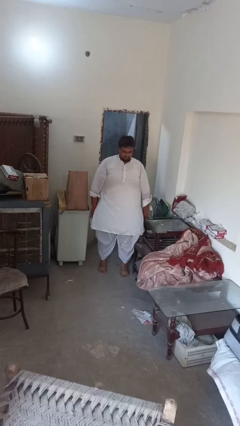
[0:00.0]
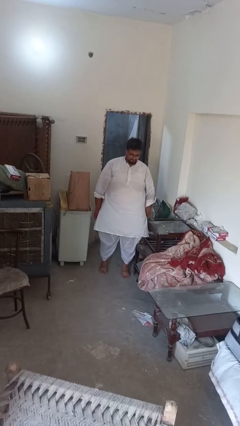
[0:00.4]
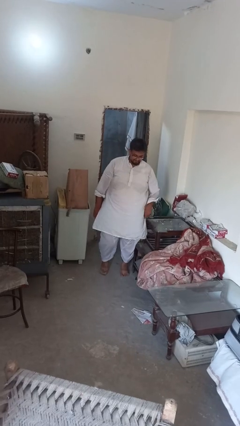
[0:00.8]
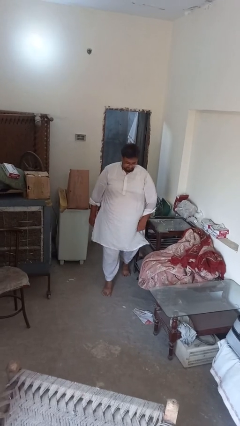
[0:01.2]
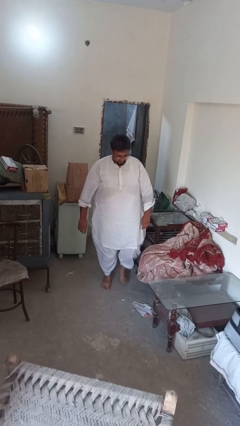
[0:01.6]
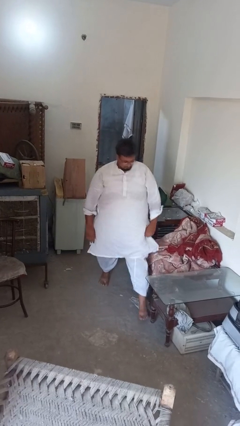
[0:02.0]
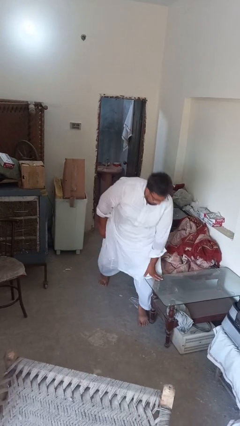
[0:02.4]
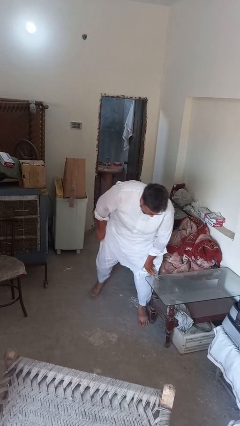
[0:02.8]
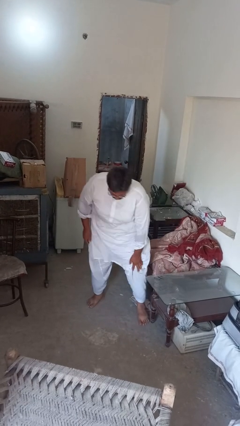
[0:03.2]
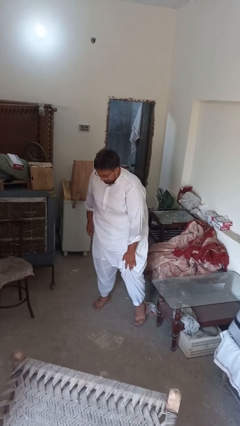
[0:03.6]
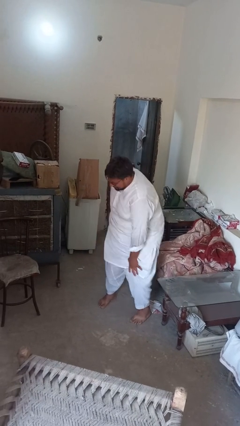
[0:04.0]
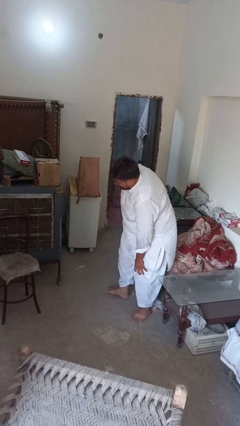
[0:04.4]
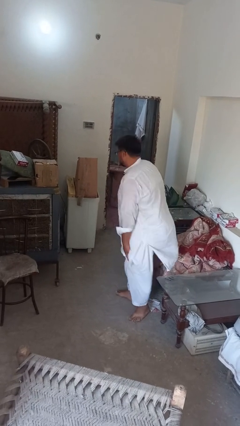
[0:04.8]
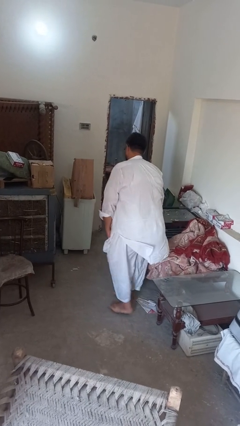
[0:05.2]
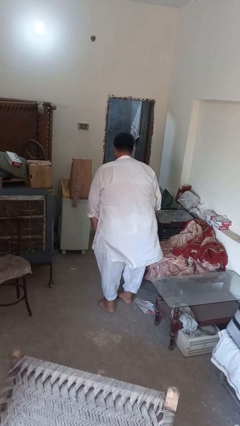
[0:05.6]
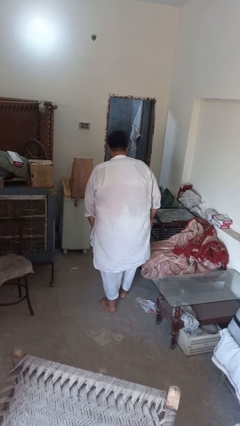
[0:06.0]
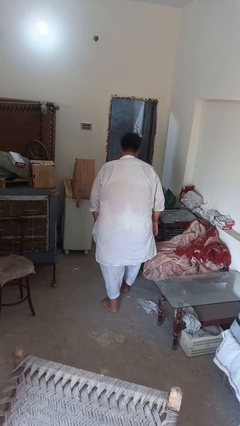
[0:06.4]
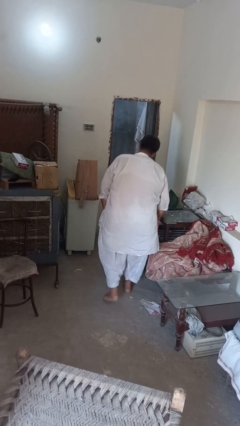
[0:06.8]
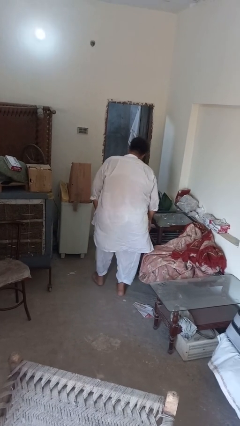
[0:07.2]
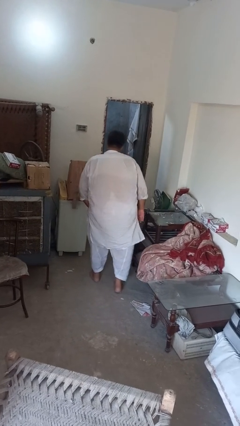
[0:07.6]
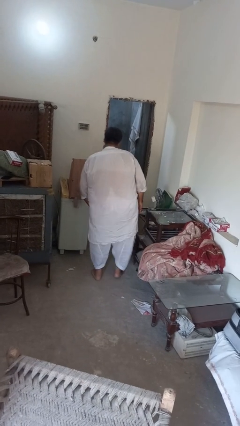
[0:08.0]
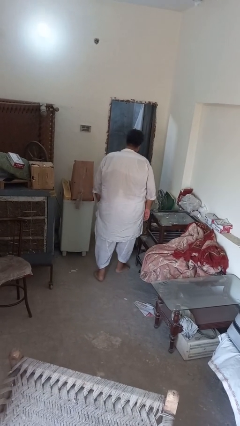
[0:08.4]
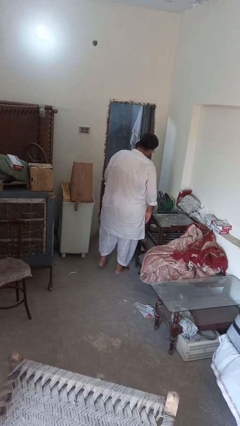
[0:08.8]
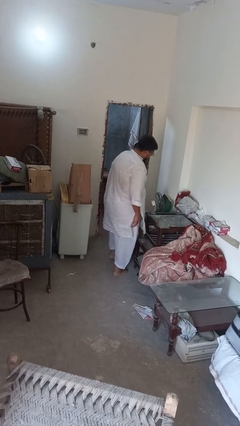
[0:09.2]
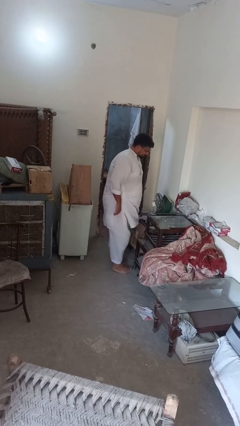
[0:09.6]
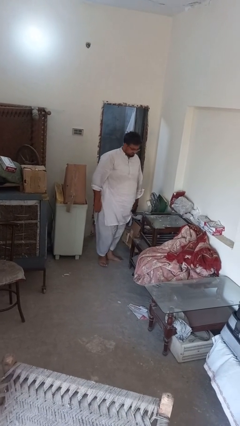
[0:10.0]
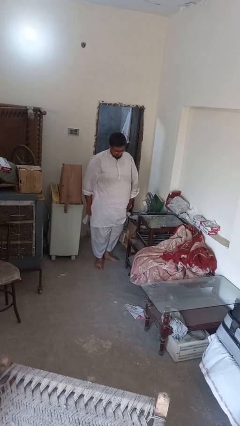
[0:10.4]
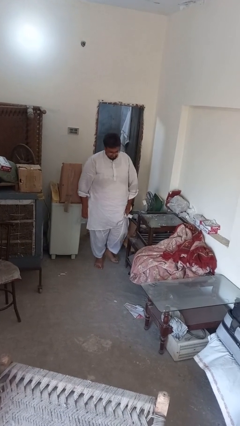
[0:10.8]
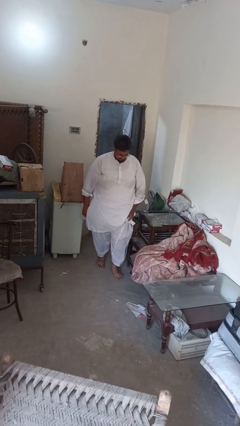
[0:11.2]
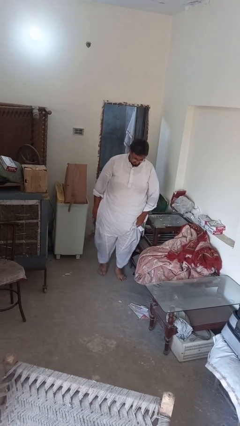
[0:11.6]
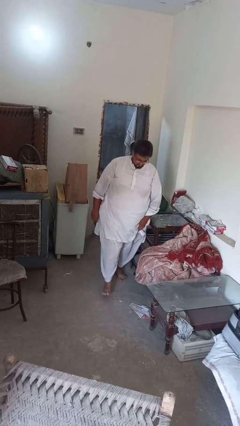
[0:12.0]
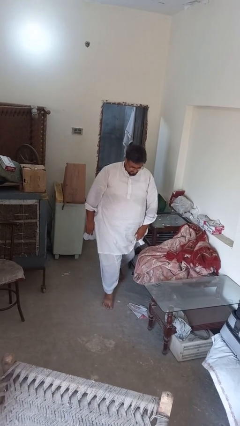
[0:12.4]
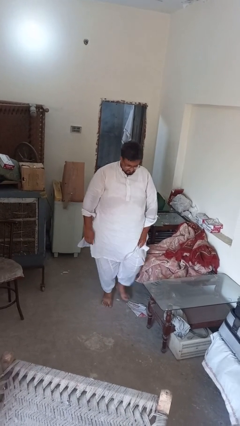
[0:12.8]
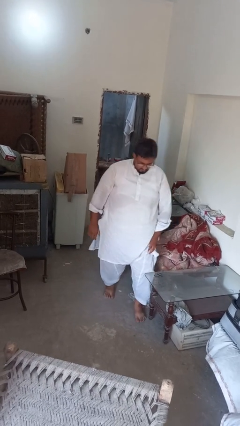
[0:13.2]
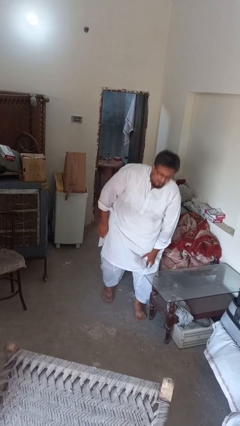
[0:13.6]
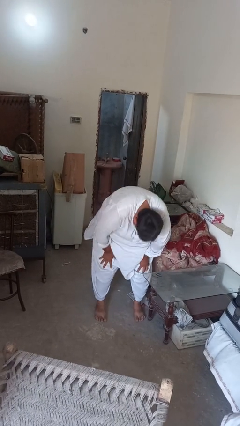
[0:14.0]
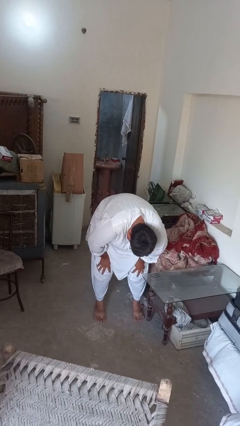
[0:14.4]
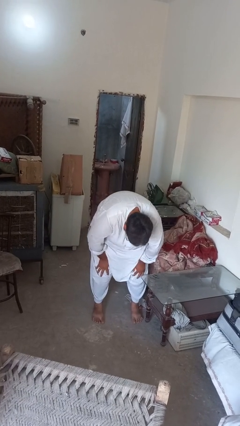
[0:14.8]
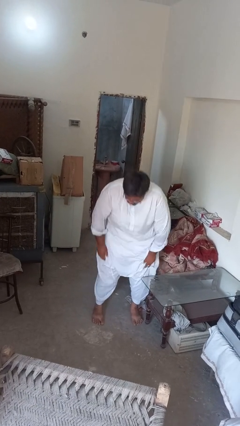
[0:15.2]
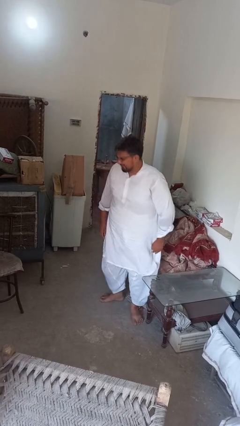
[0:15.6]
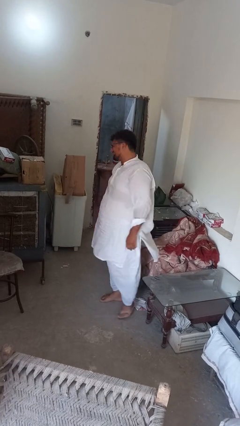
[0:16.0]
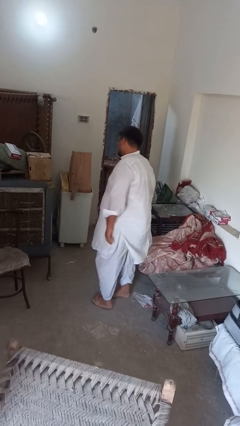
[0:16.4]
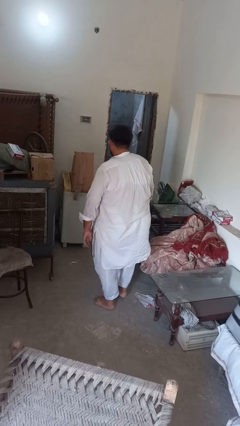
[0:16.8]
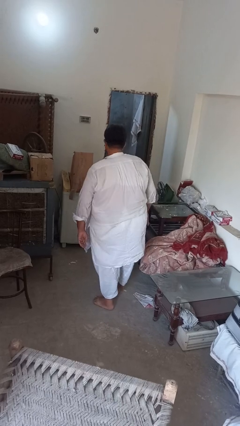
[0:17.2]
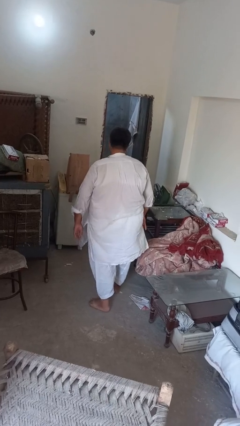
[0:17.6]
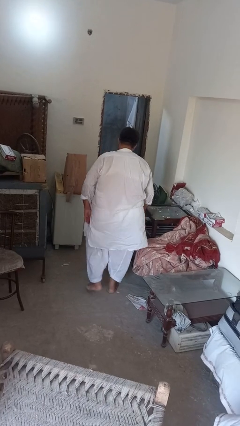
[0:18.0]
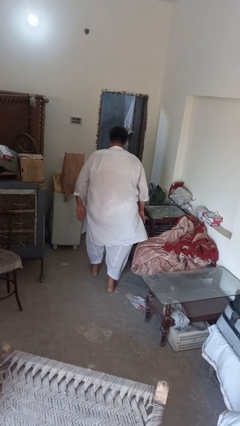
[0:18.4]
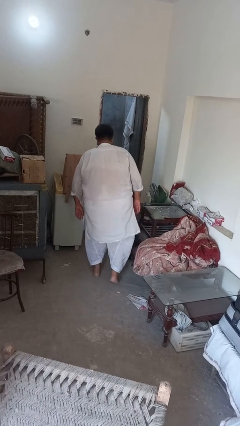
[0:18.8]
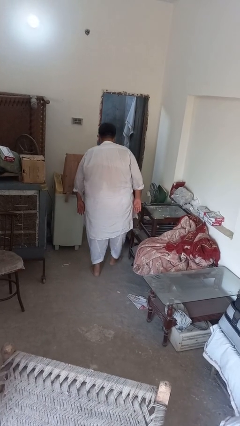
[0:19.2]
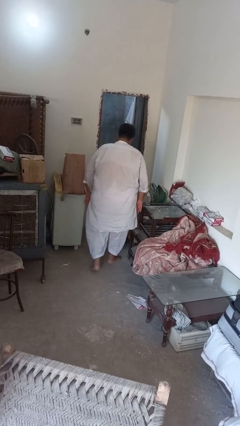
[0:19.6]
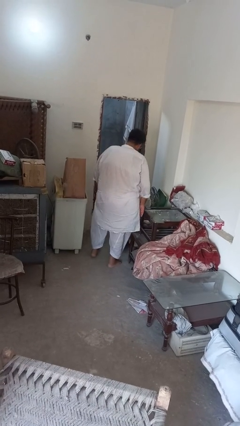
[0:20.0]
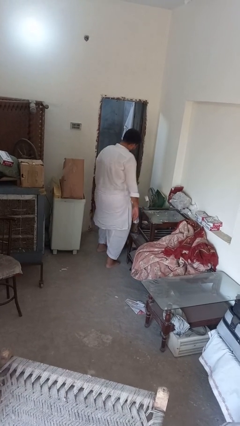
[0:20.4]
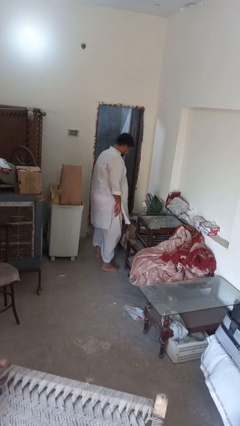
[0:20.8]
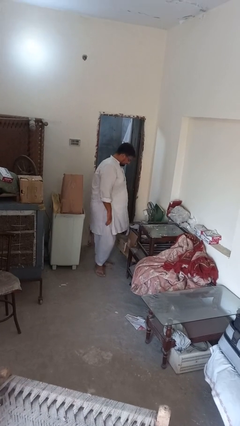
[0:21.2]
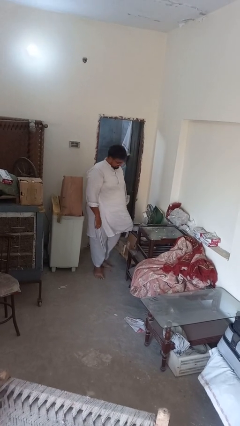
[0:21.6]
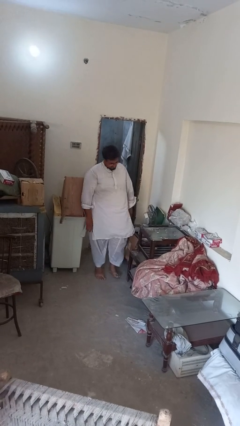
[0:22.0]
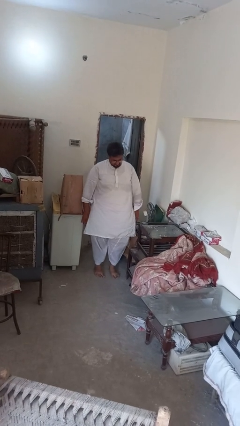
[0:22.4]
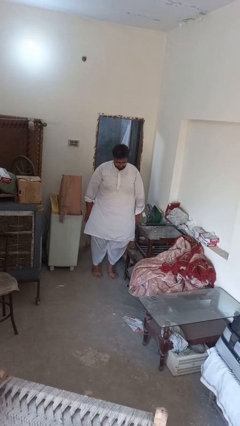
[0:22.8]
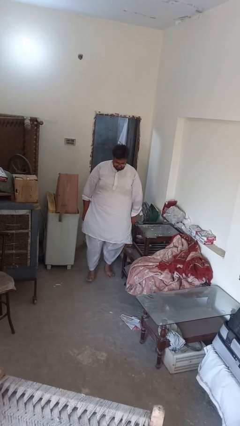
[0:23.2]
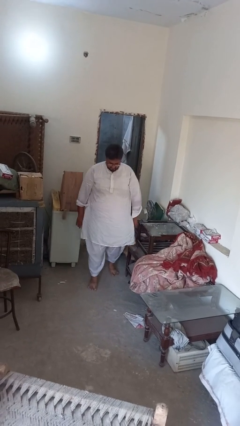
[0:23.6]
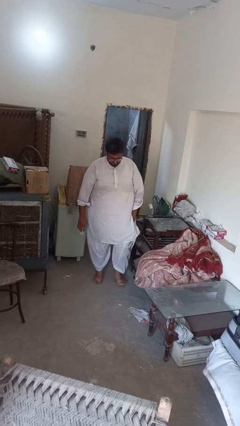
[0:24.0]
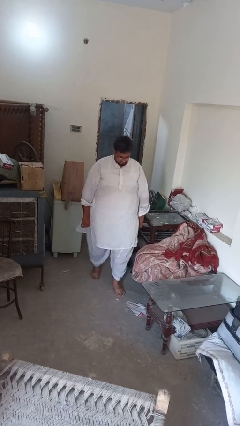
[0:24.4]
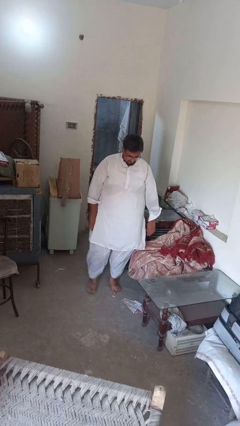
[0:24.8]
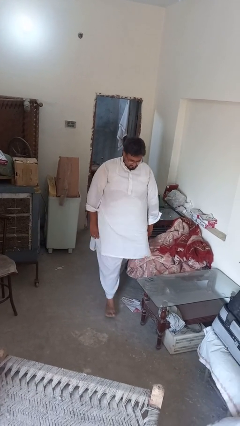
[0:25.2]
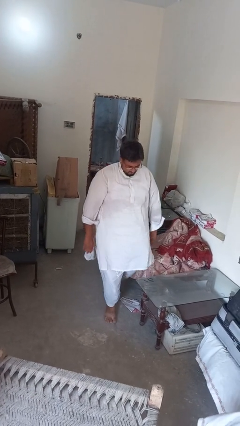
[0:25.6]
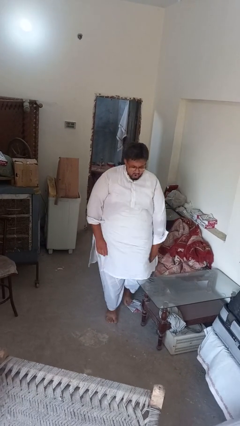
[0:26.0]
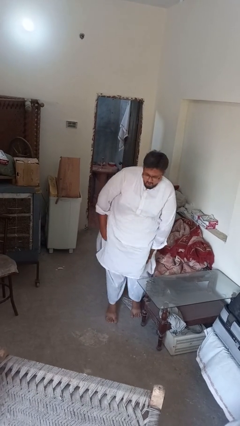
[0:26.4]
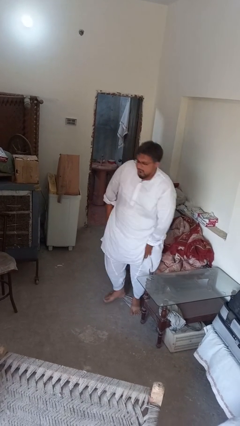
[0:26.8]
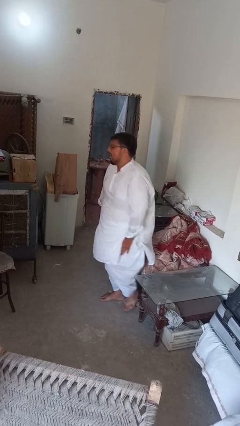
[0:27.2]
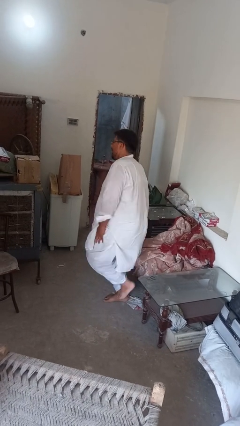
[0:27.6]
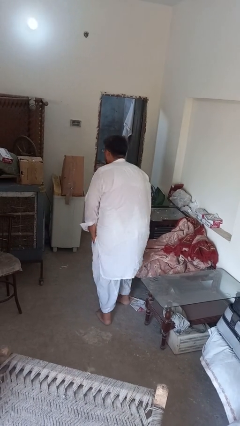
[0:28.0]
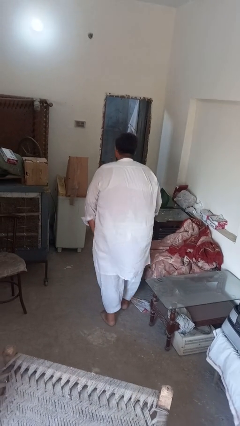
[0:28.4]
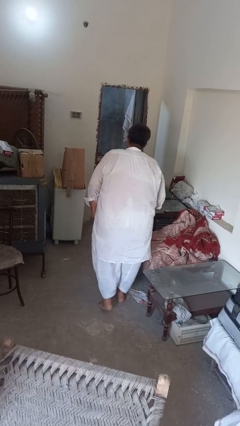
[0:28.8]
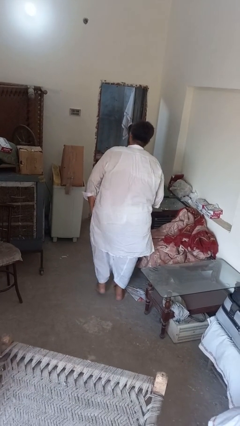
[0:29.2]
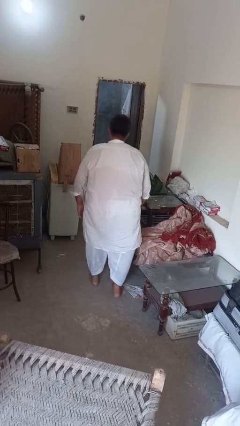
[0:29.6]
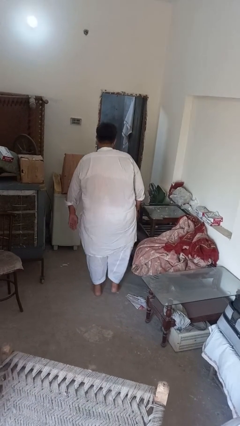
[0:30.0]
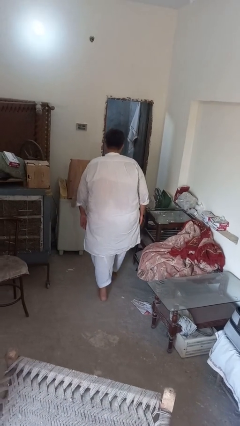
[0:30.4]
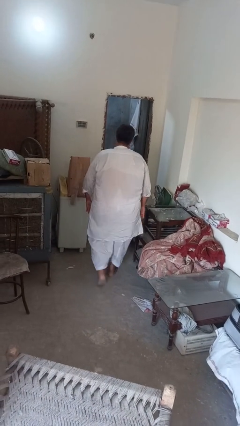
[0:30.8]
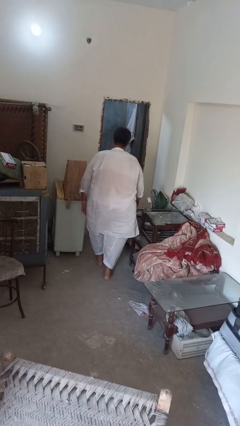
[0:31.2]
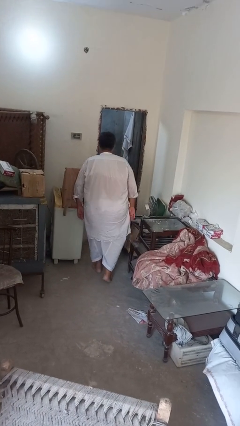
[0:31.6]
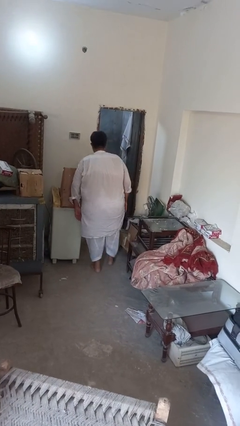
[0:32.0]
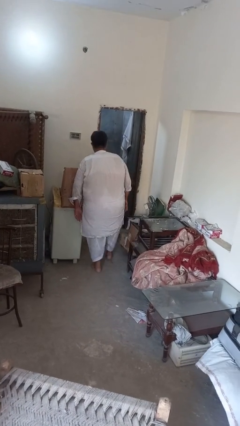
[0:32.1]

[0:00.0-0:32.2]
person stubs toe

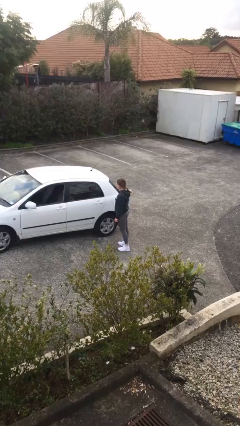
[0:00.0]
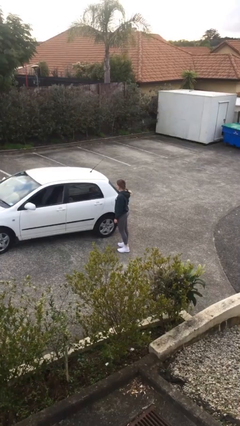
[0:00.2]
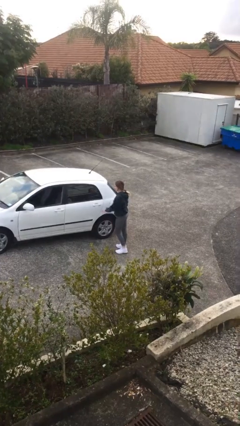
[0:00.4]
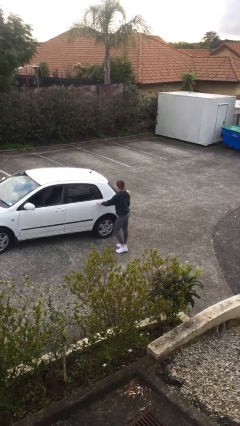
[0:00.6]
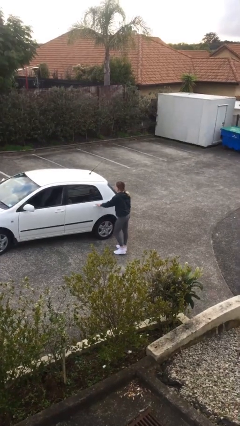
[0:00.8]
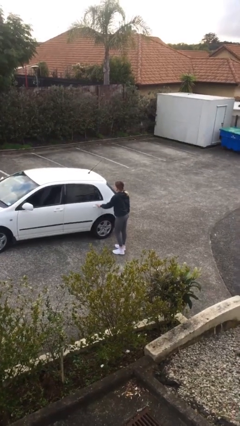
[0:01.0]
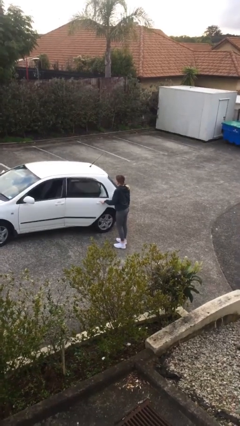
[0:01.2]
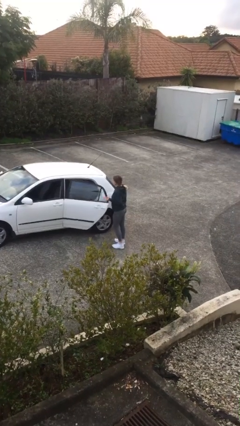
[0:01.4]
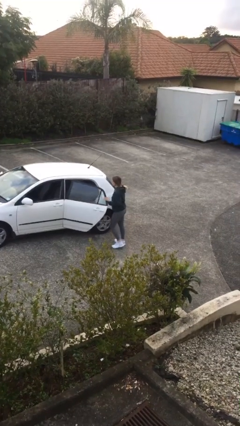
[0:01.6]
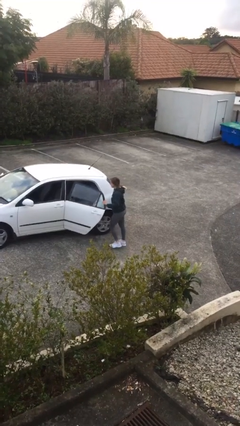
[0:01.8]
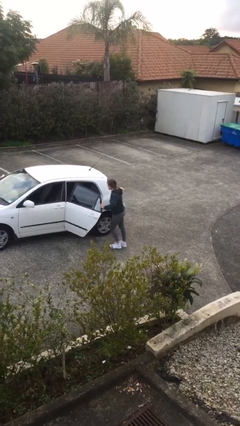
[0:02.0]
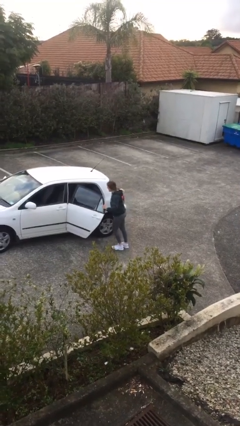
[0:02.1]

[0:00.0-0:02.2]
person opens car door
